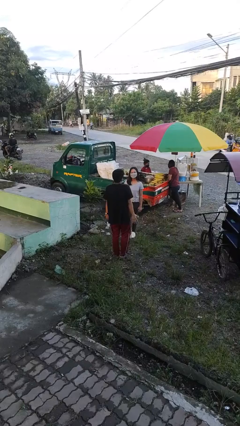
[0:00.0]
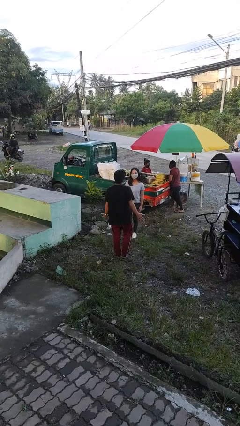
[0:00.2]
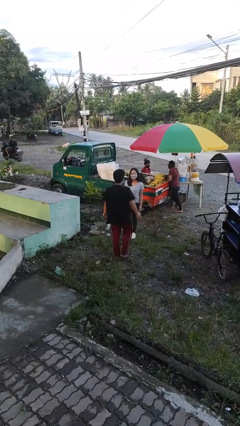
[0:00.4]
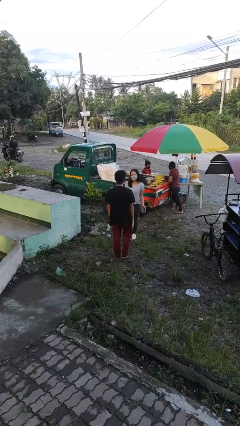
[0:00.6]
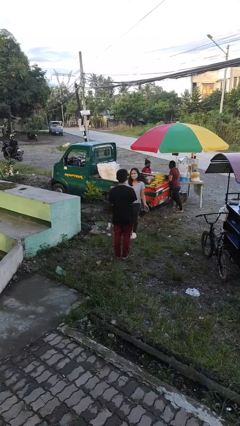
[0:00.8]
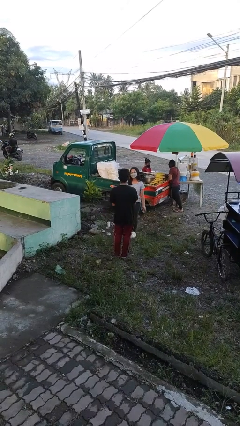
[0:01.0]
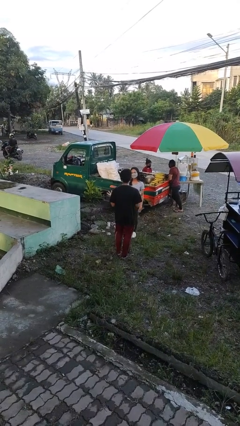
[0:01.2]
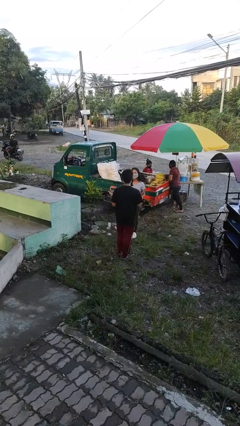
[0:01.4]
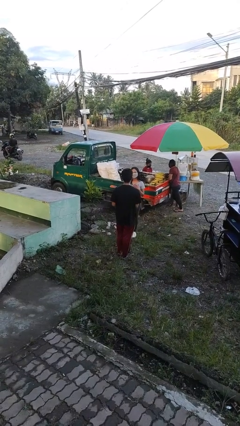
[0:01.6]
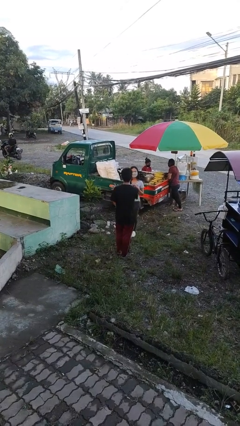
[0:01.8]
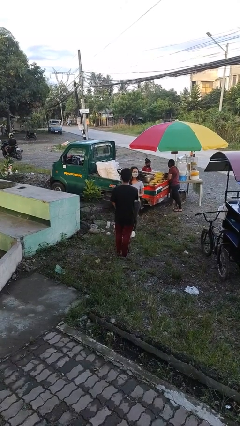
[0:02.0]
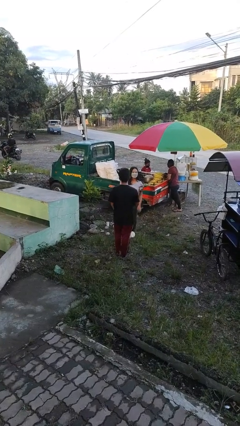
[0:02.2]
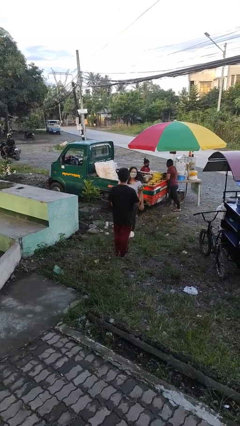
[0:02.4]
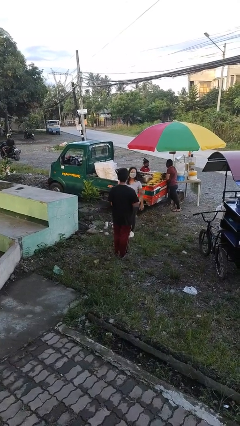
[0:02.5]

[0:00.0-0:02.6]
person talks to person

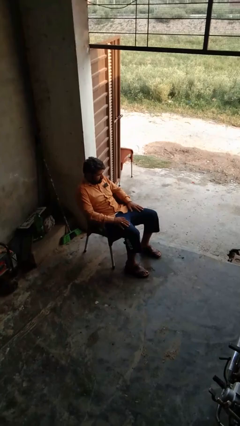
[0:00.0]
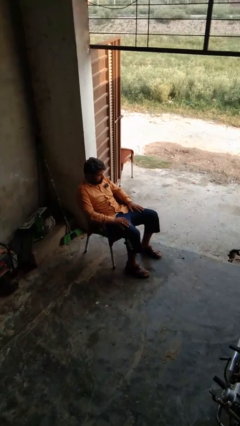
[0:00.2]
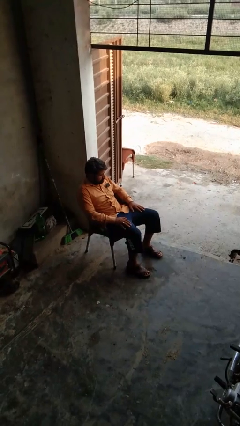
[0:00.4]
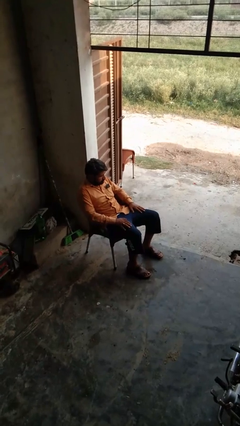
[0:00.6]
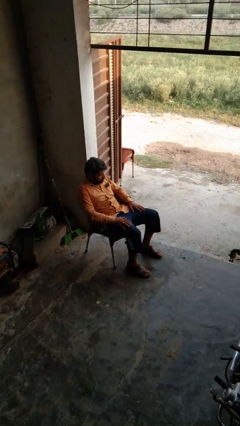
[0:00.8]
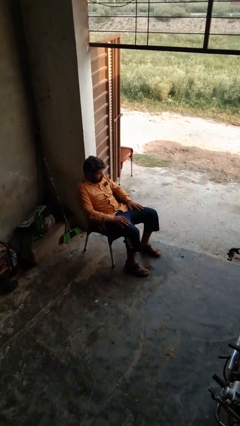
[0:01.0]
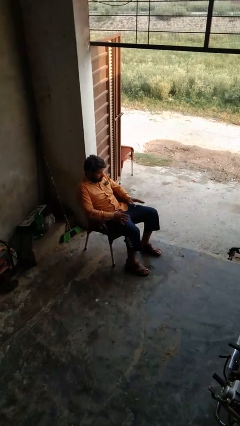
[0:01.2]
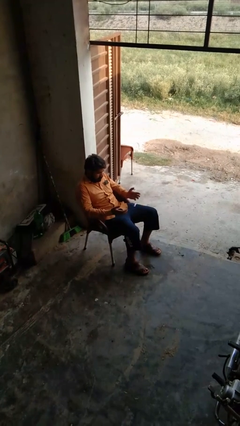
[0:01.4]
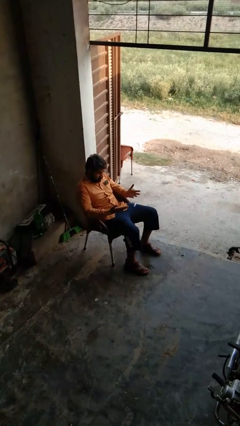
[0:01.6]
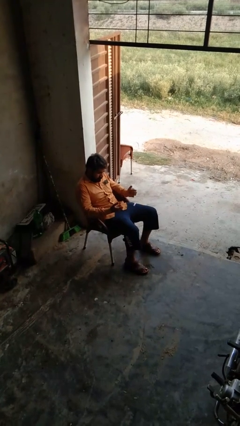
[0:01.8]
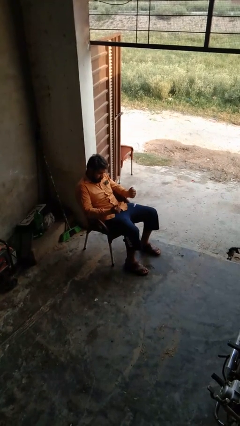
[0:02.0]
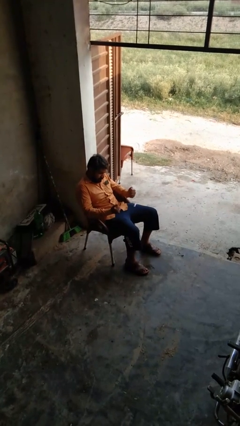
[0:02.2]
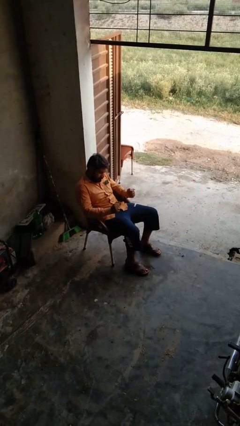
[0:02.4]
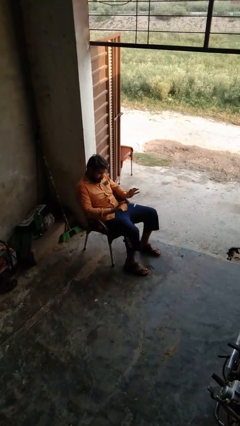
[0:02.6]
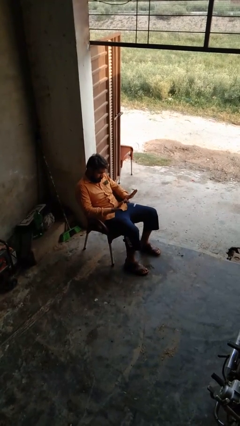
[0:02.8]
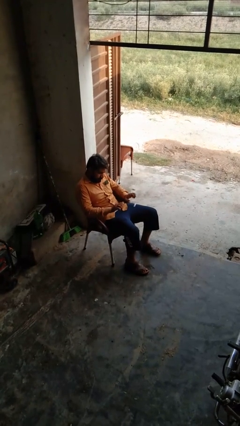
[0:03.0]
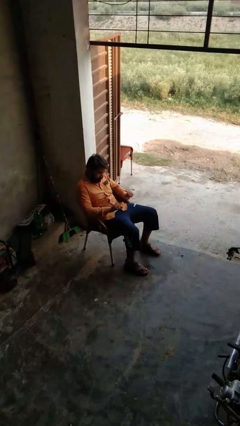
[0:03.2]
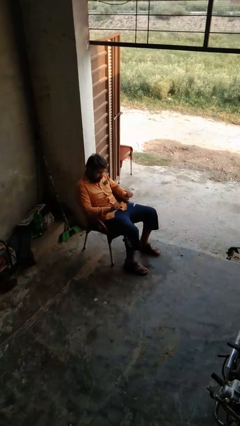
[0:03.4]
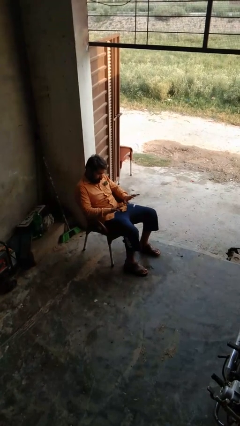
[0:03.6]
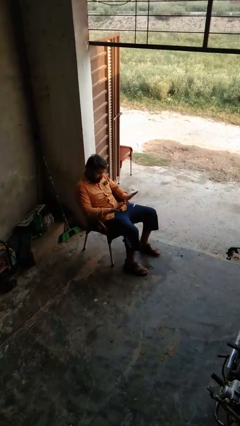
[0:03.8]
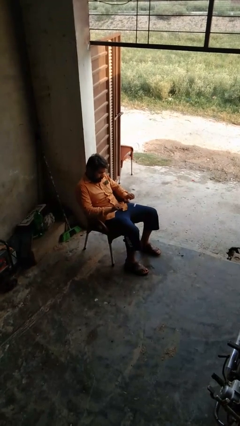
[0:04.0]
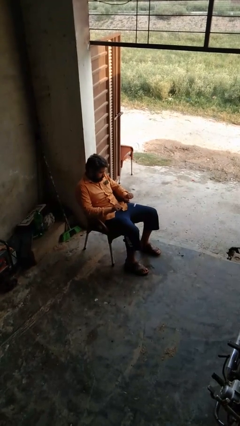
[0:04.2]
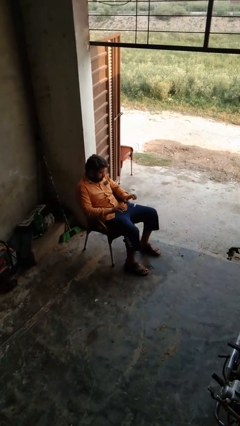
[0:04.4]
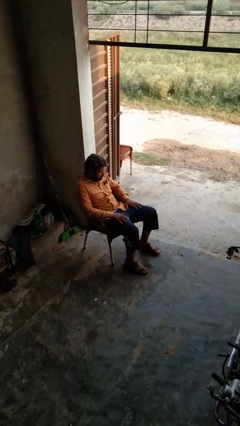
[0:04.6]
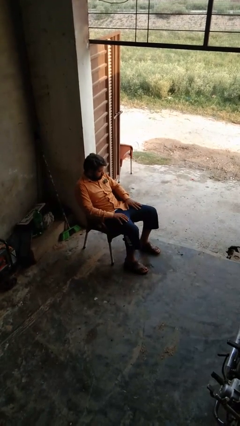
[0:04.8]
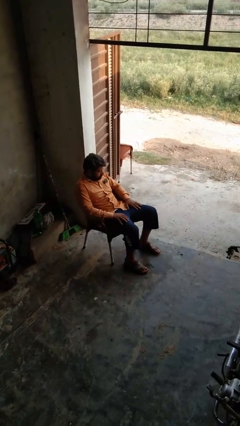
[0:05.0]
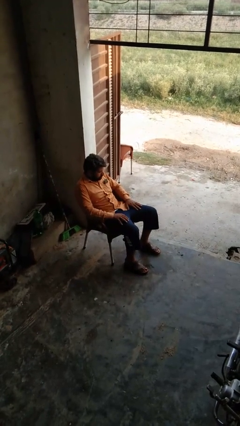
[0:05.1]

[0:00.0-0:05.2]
person looks at hands in lap

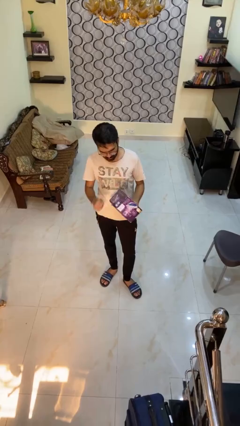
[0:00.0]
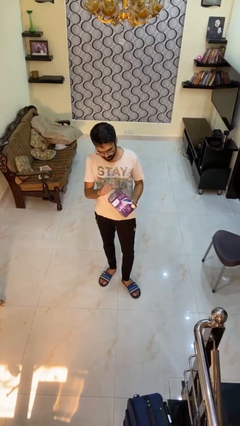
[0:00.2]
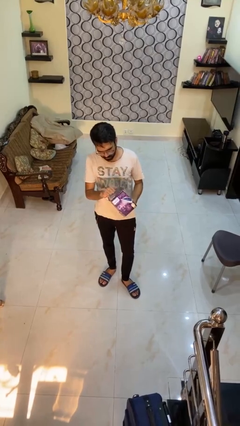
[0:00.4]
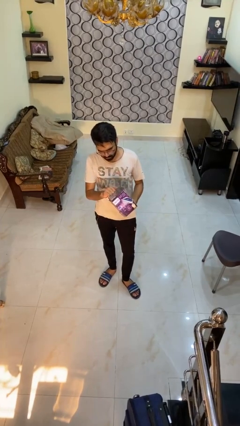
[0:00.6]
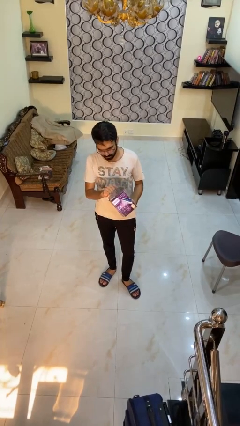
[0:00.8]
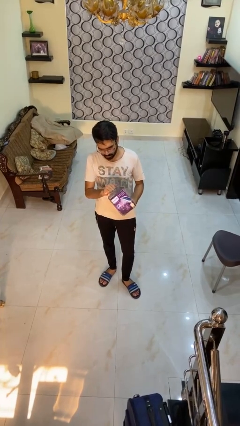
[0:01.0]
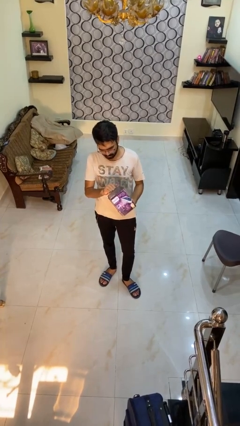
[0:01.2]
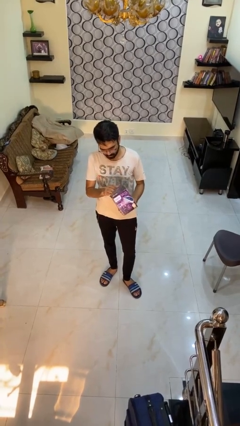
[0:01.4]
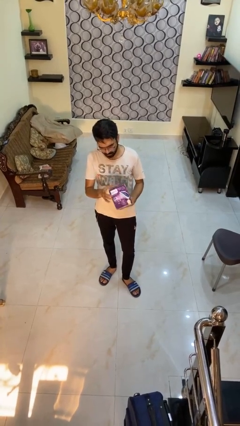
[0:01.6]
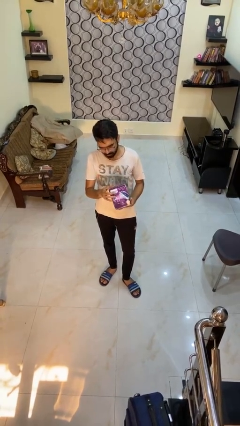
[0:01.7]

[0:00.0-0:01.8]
person taps object with finger

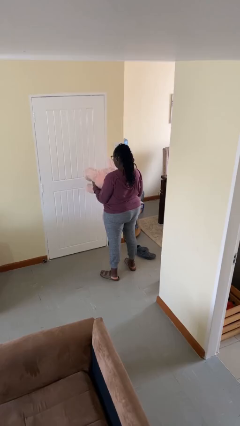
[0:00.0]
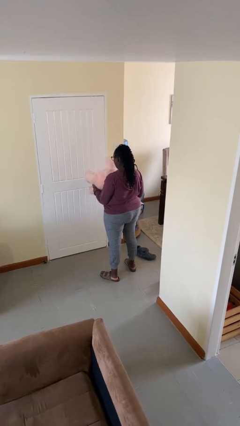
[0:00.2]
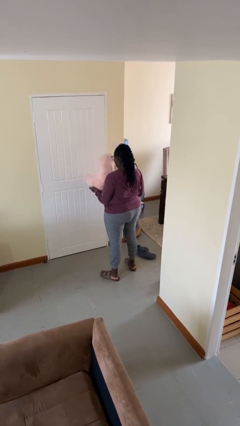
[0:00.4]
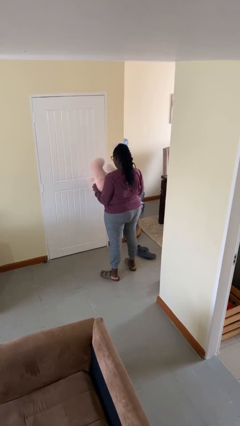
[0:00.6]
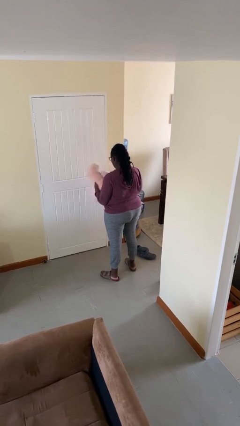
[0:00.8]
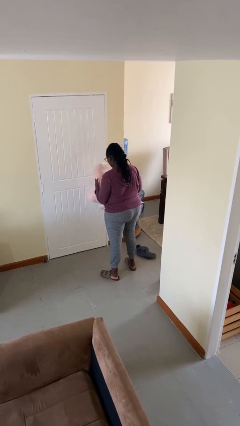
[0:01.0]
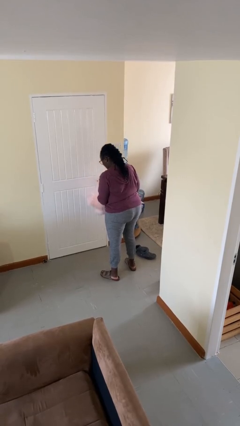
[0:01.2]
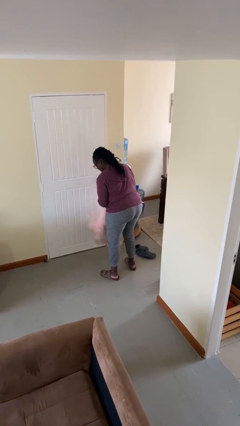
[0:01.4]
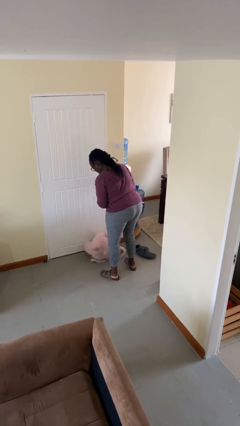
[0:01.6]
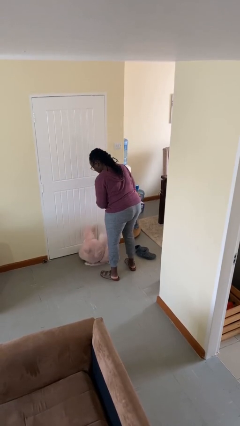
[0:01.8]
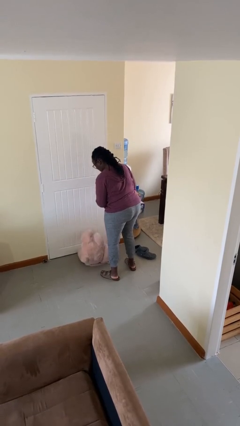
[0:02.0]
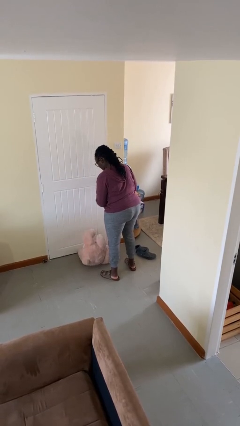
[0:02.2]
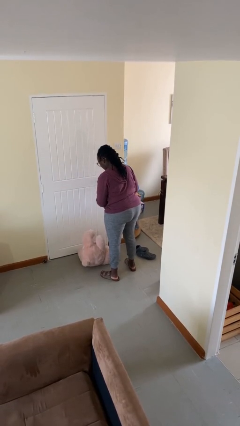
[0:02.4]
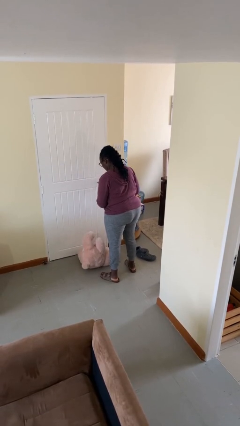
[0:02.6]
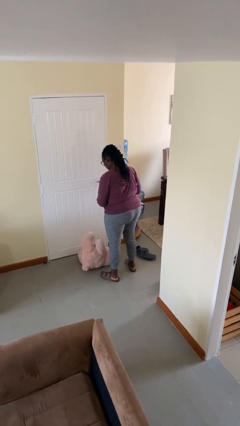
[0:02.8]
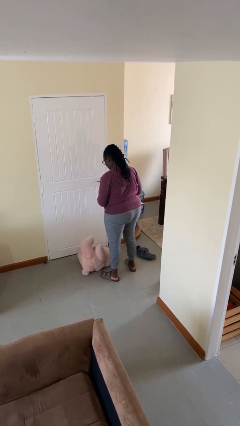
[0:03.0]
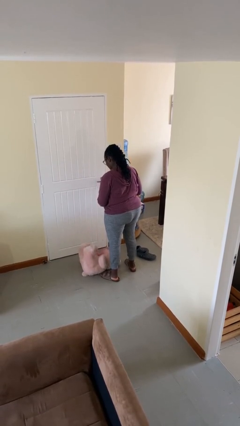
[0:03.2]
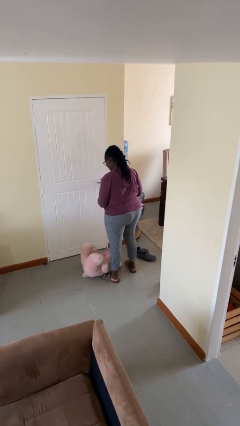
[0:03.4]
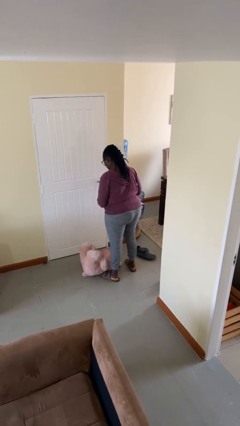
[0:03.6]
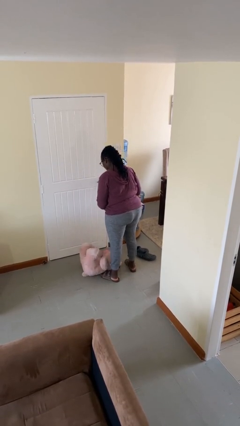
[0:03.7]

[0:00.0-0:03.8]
person drops object

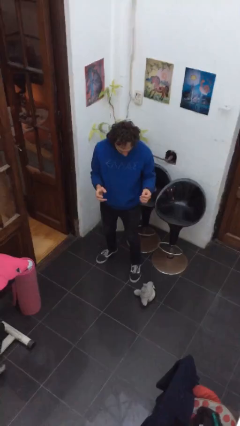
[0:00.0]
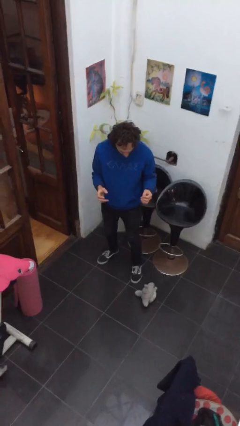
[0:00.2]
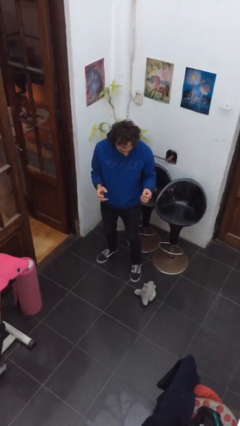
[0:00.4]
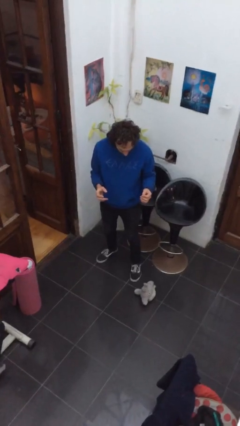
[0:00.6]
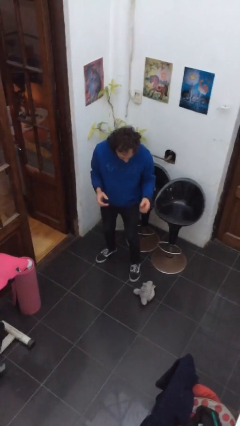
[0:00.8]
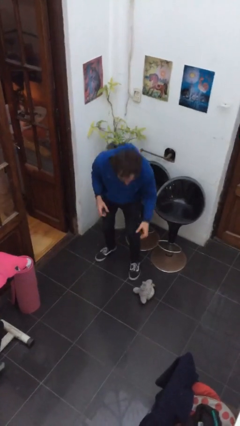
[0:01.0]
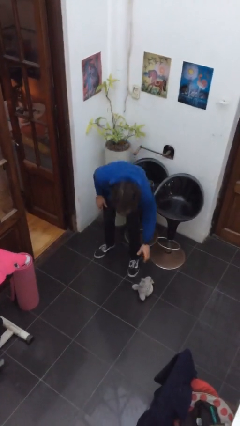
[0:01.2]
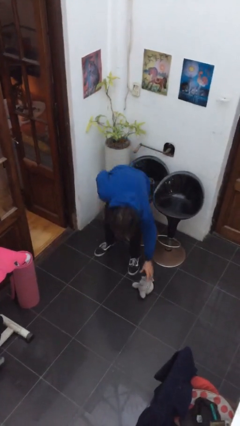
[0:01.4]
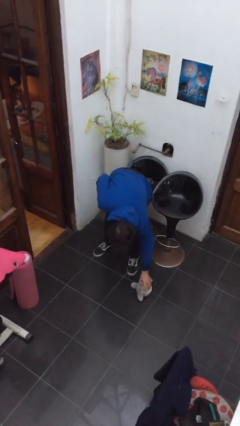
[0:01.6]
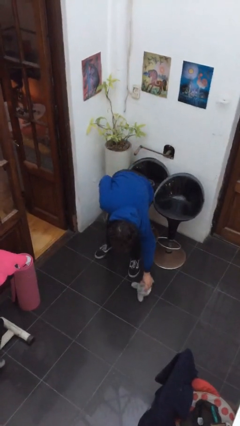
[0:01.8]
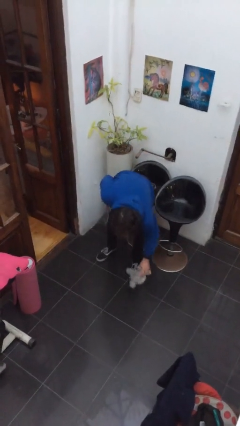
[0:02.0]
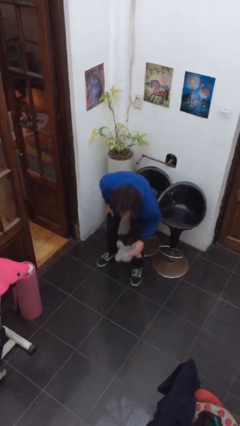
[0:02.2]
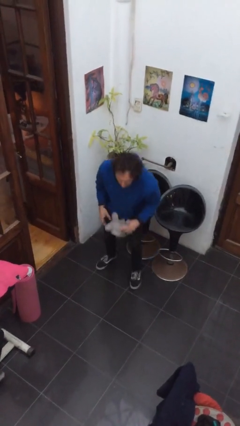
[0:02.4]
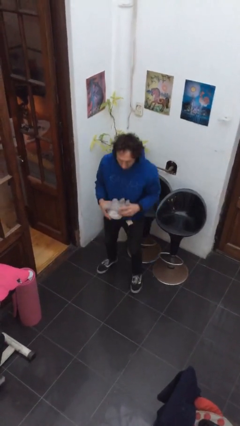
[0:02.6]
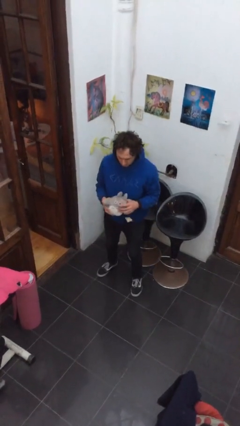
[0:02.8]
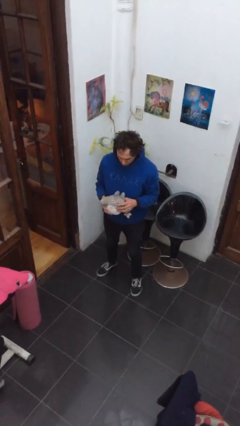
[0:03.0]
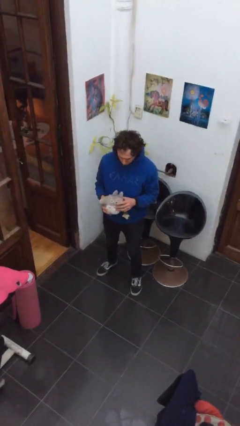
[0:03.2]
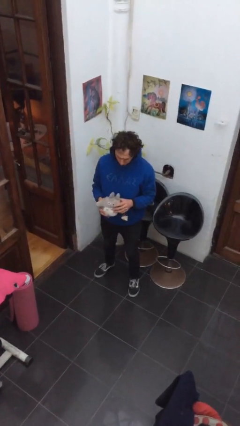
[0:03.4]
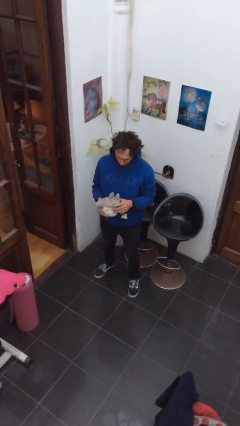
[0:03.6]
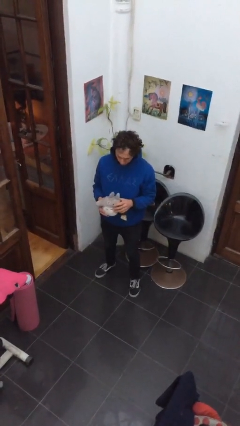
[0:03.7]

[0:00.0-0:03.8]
person picks up object from floor
